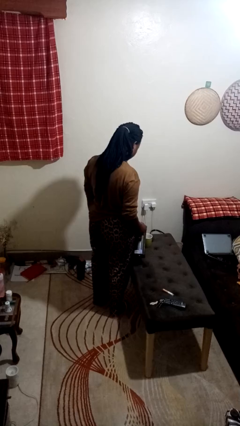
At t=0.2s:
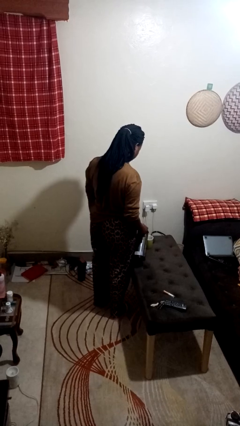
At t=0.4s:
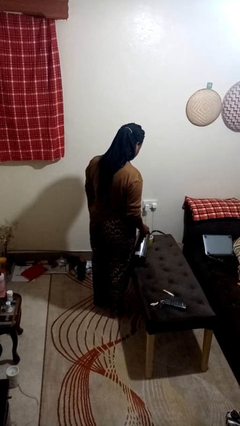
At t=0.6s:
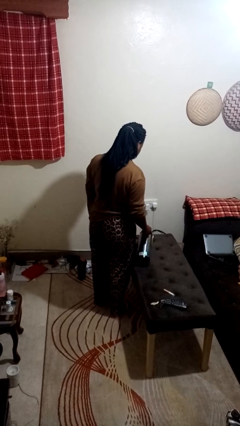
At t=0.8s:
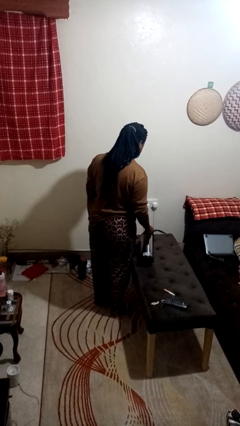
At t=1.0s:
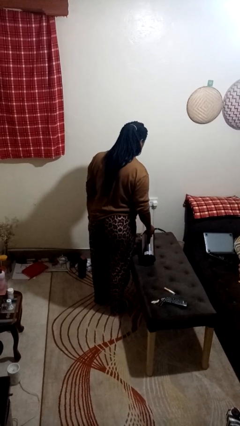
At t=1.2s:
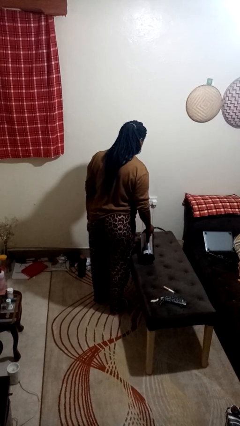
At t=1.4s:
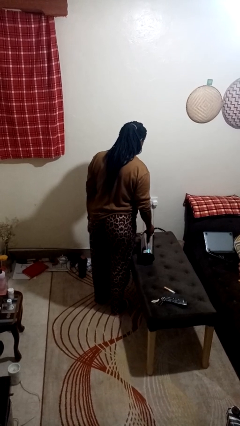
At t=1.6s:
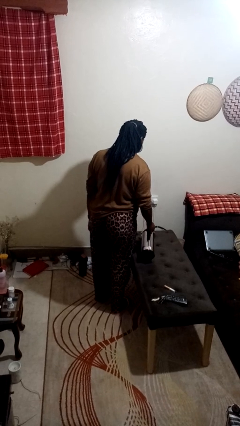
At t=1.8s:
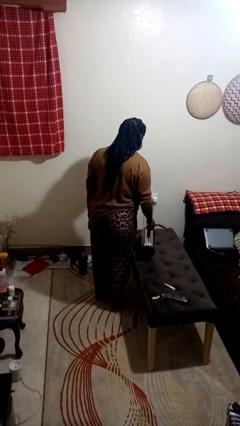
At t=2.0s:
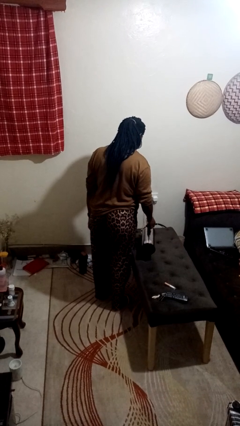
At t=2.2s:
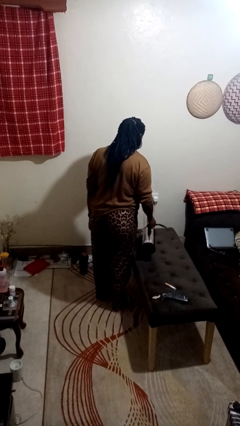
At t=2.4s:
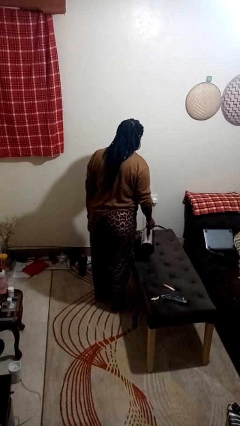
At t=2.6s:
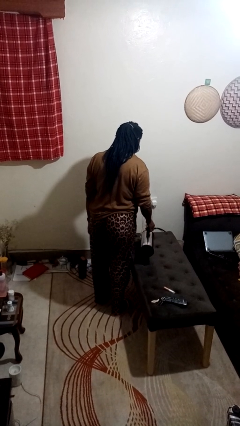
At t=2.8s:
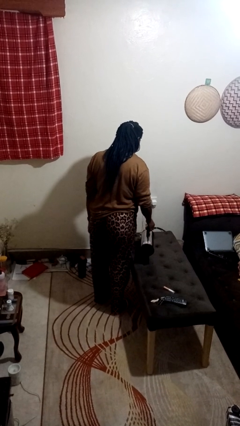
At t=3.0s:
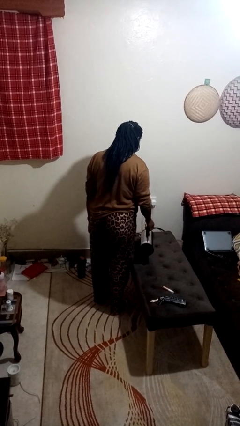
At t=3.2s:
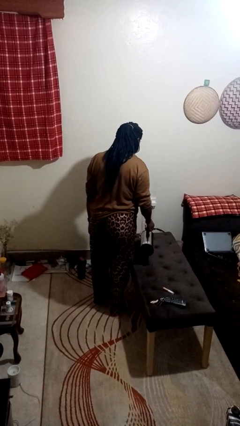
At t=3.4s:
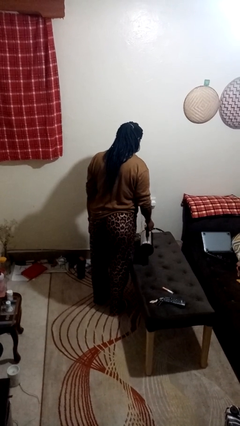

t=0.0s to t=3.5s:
person pours coffee into mug

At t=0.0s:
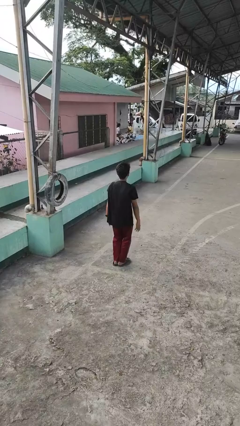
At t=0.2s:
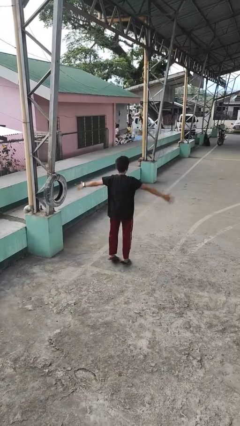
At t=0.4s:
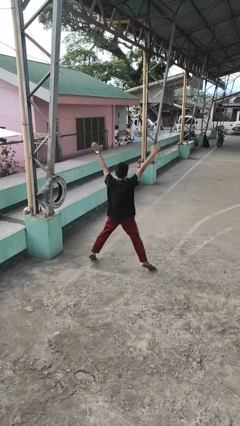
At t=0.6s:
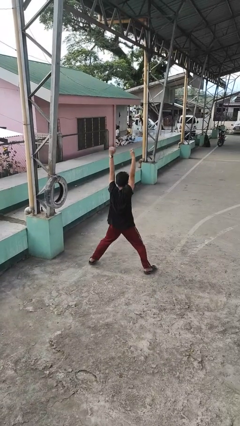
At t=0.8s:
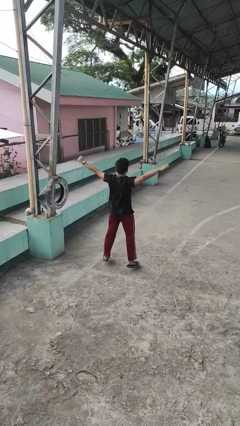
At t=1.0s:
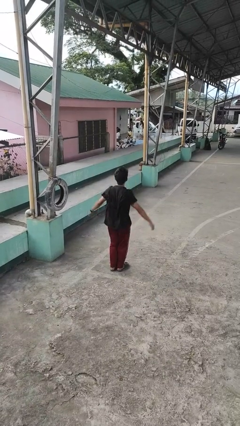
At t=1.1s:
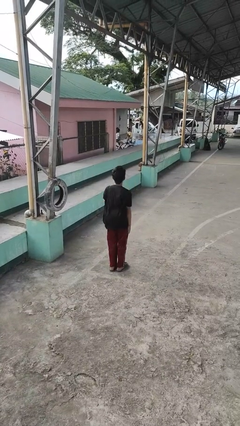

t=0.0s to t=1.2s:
person exercises with jumping jacks

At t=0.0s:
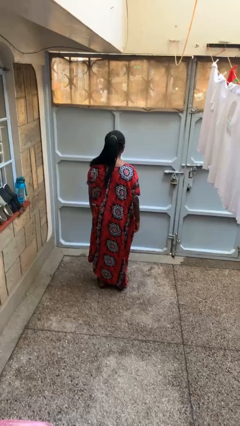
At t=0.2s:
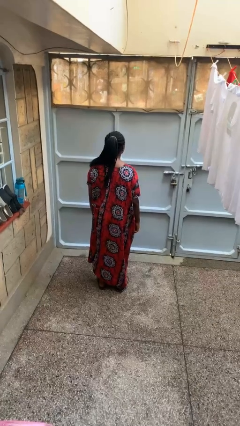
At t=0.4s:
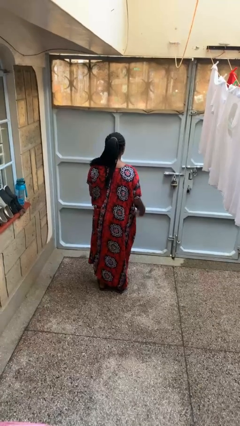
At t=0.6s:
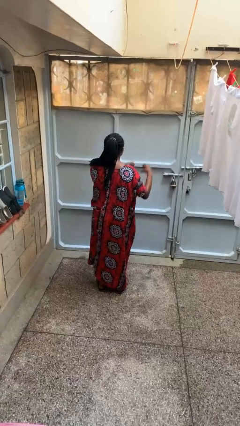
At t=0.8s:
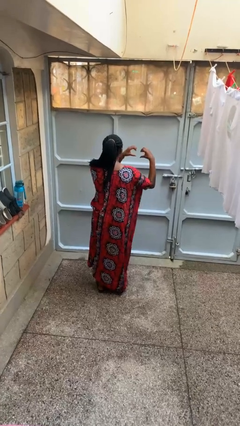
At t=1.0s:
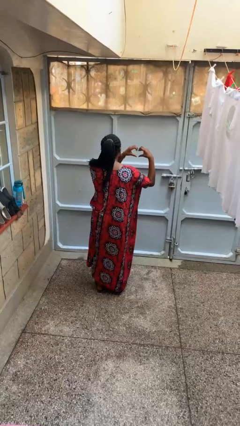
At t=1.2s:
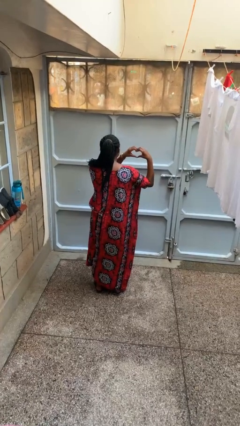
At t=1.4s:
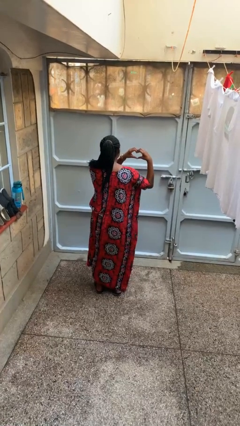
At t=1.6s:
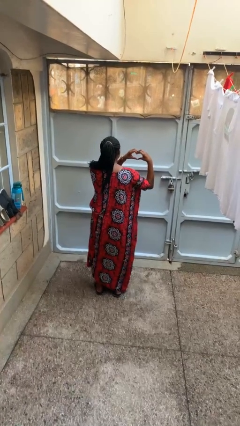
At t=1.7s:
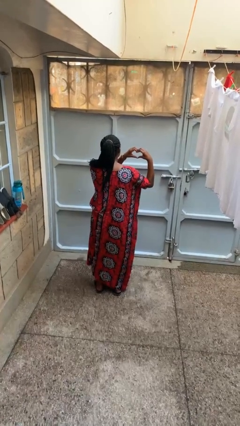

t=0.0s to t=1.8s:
person gestures heart

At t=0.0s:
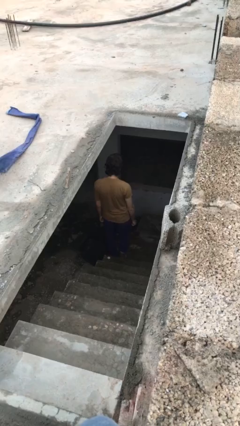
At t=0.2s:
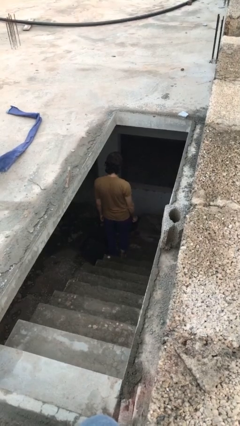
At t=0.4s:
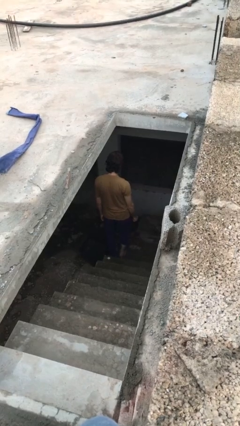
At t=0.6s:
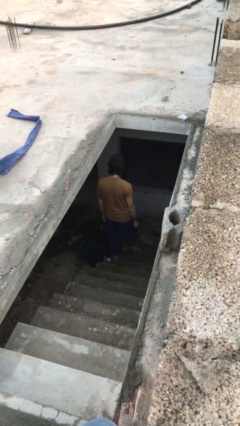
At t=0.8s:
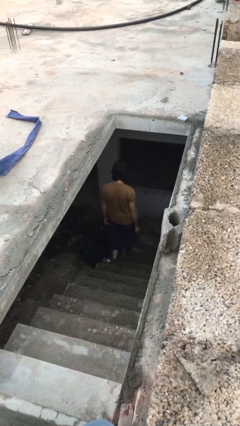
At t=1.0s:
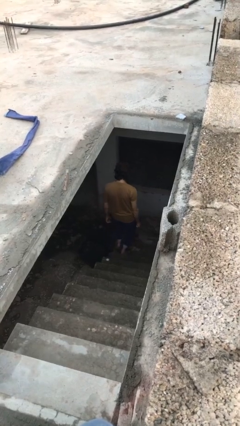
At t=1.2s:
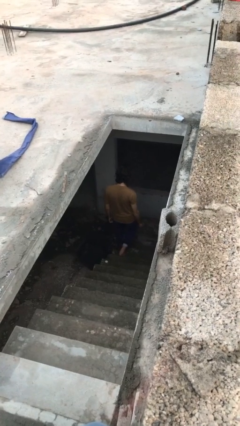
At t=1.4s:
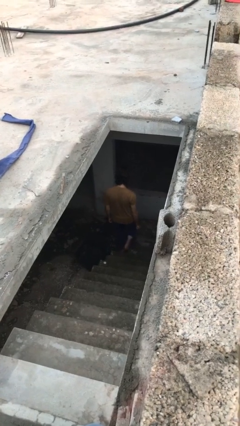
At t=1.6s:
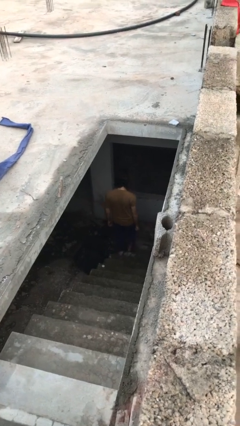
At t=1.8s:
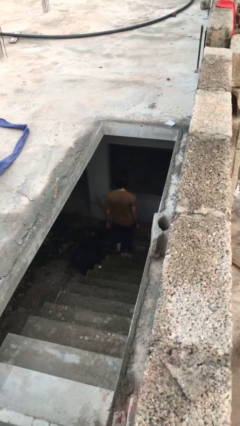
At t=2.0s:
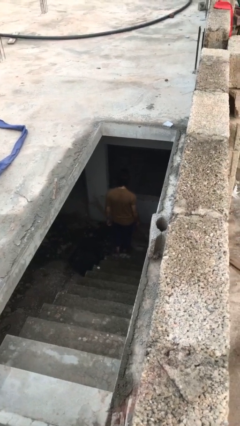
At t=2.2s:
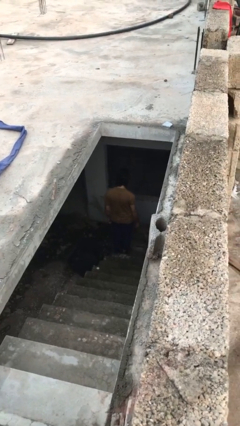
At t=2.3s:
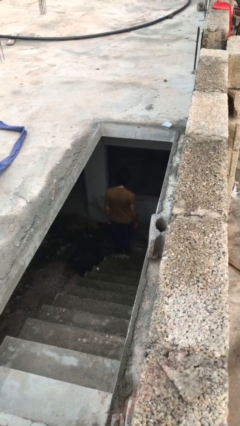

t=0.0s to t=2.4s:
person climbs down stairs

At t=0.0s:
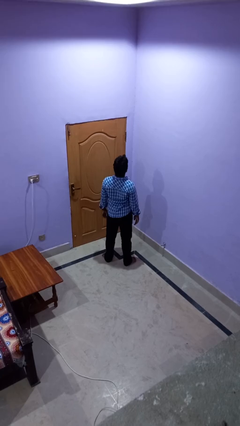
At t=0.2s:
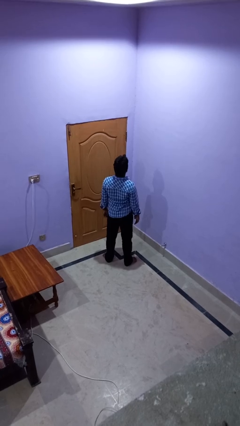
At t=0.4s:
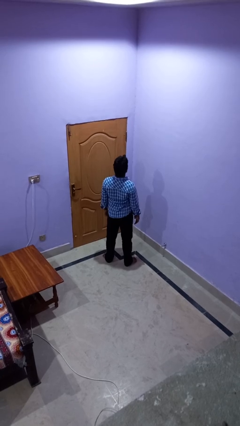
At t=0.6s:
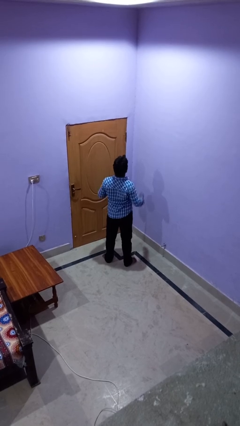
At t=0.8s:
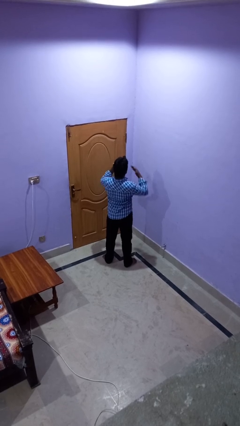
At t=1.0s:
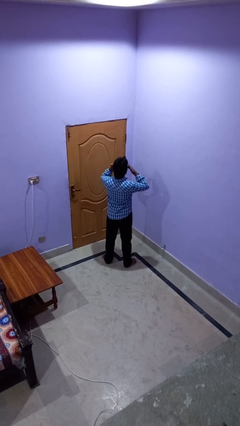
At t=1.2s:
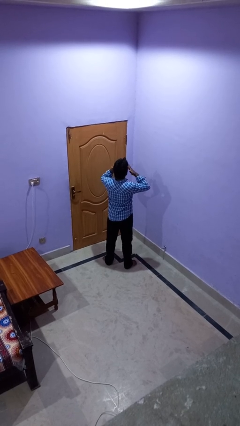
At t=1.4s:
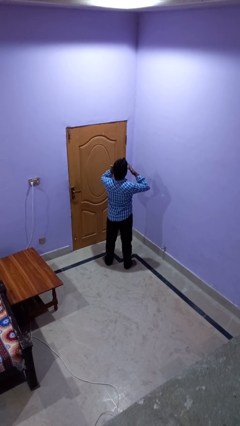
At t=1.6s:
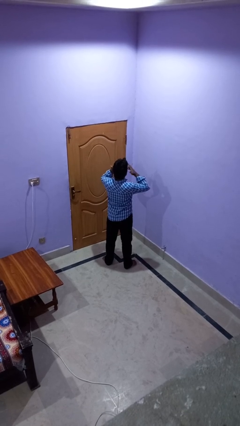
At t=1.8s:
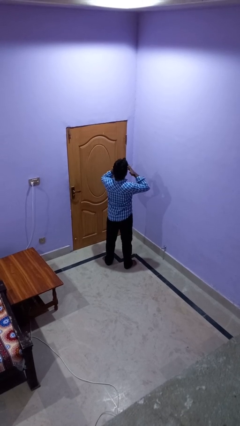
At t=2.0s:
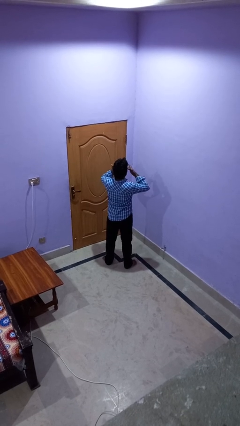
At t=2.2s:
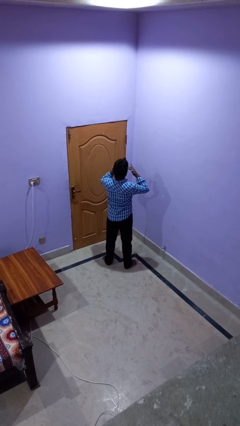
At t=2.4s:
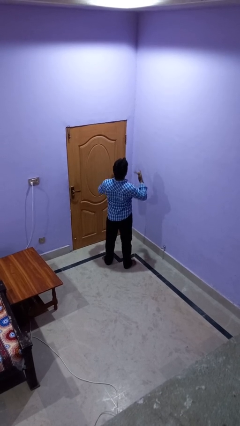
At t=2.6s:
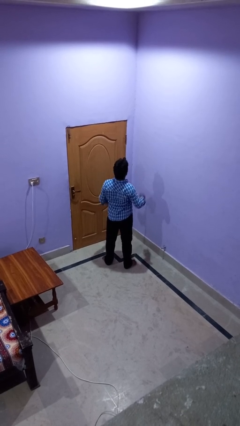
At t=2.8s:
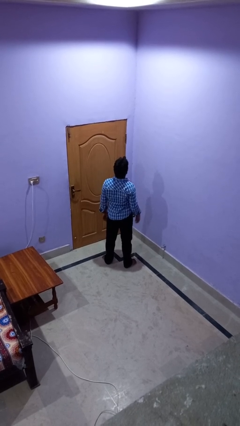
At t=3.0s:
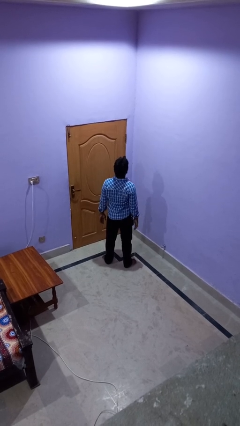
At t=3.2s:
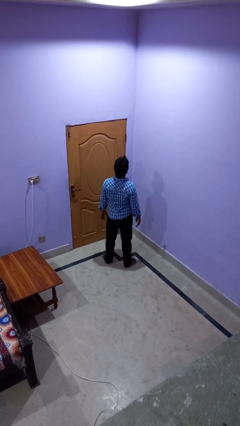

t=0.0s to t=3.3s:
person rubs eyes

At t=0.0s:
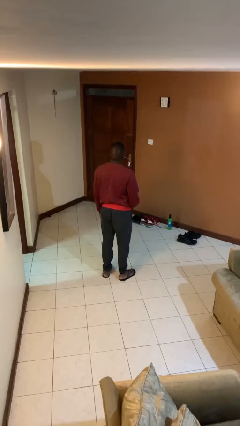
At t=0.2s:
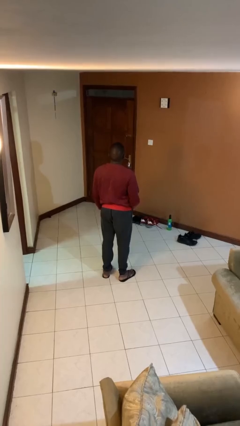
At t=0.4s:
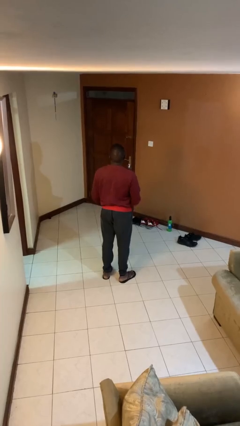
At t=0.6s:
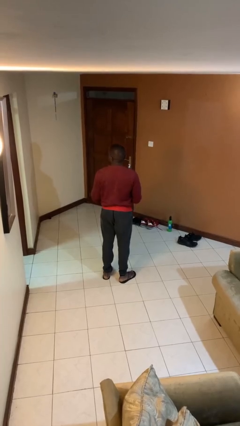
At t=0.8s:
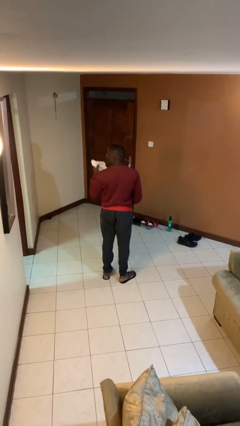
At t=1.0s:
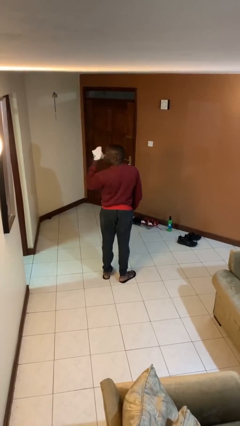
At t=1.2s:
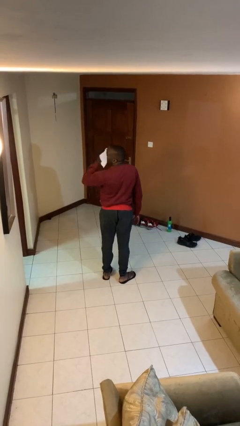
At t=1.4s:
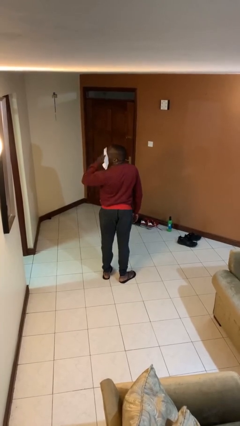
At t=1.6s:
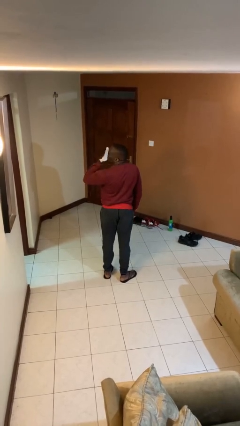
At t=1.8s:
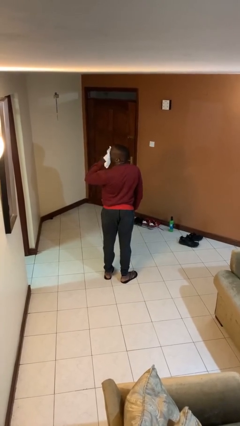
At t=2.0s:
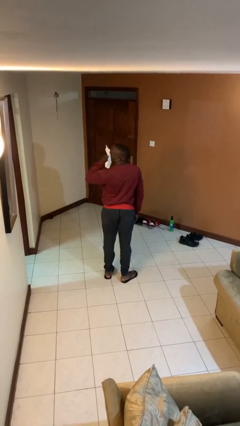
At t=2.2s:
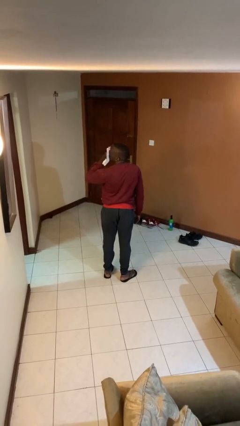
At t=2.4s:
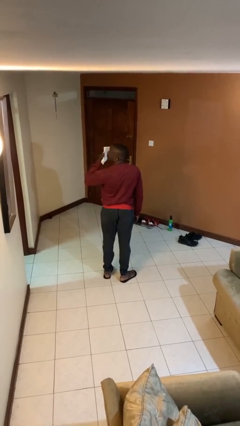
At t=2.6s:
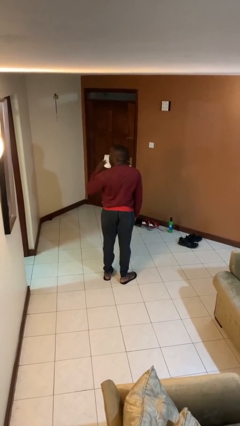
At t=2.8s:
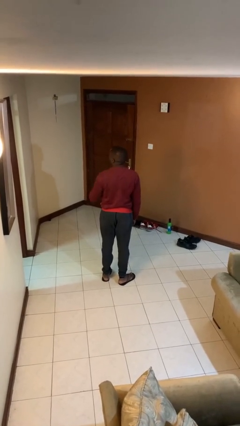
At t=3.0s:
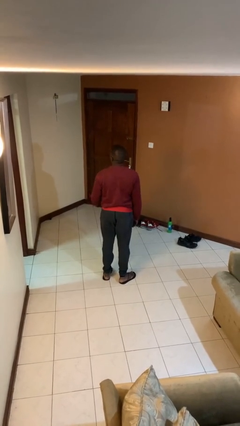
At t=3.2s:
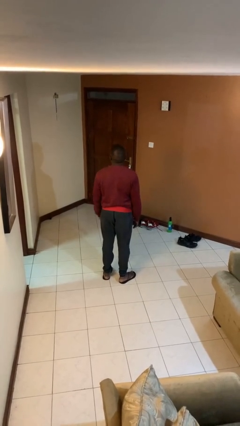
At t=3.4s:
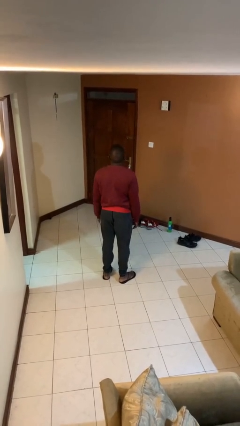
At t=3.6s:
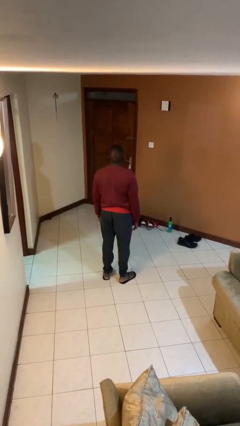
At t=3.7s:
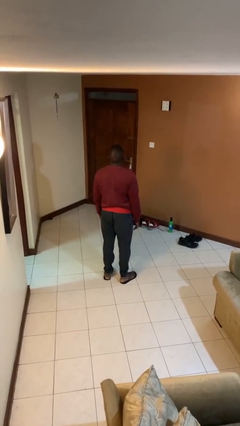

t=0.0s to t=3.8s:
person wipes mouth with napkin

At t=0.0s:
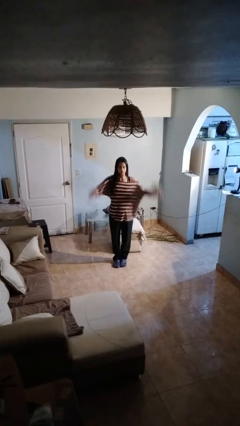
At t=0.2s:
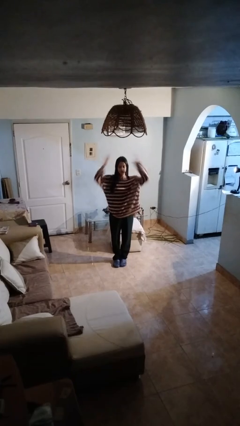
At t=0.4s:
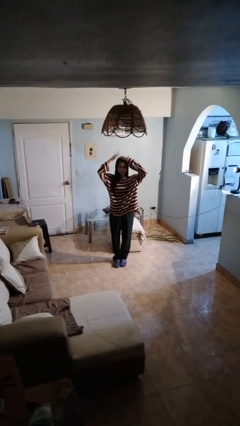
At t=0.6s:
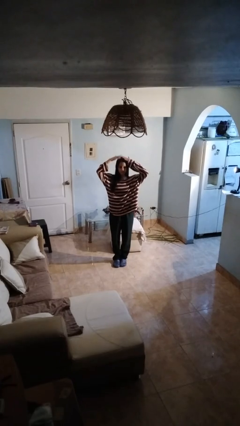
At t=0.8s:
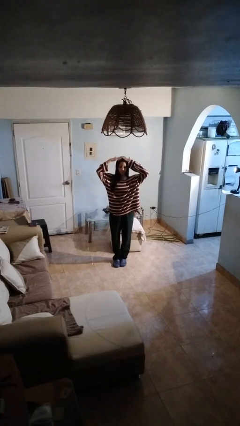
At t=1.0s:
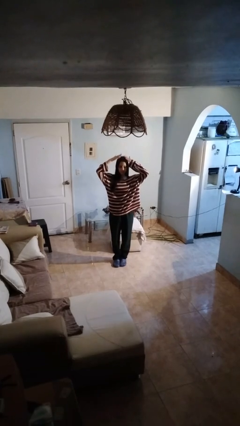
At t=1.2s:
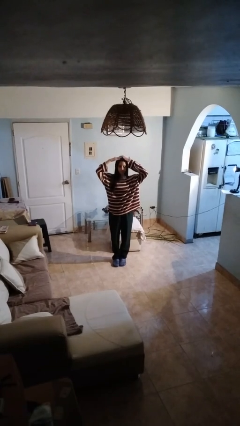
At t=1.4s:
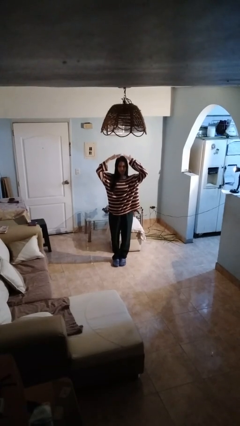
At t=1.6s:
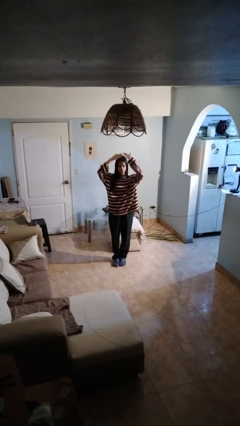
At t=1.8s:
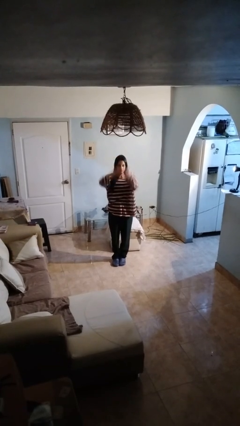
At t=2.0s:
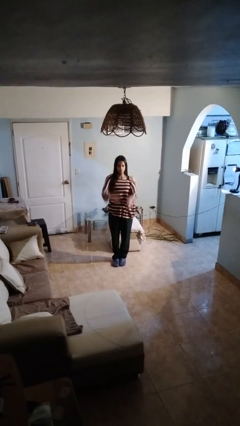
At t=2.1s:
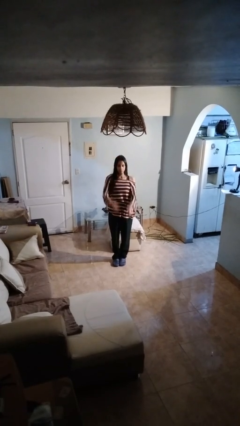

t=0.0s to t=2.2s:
person pats head
